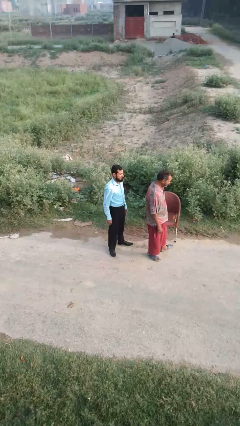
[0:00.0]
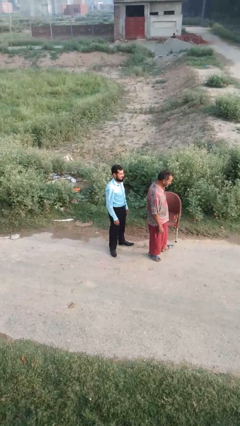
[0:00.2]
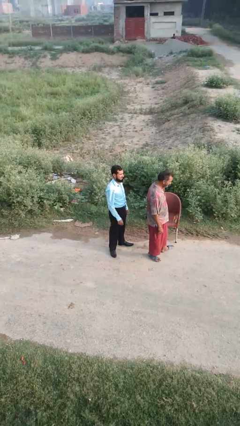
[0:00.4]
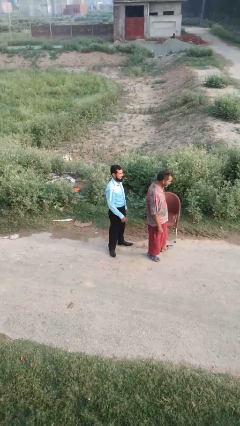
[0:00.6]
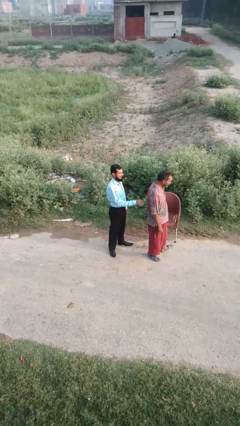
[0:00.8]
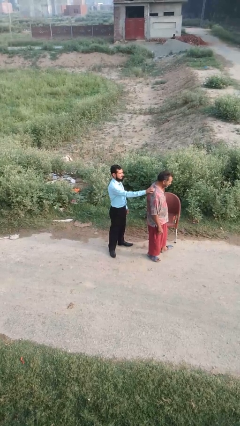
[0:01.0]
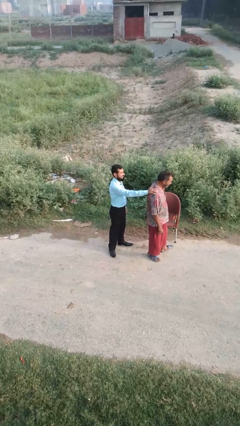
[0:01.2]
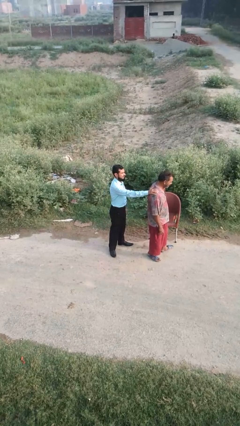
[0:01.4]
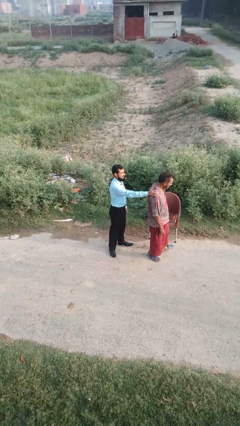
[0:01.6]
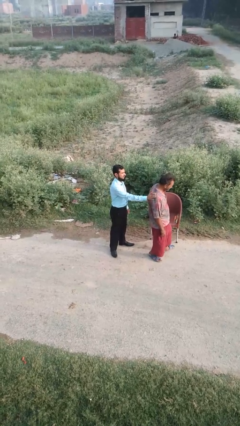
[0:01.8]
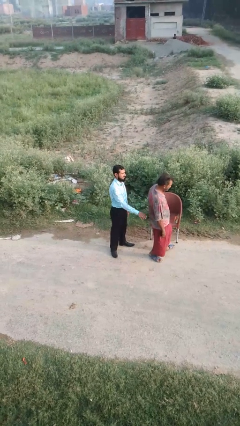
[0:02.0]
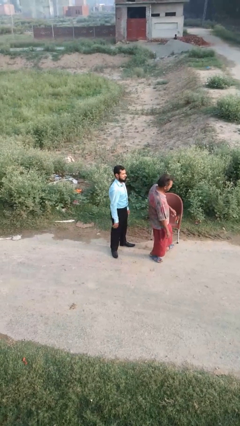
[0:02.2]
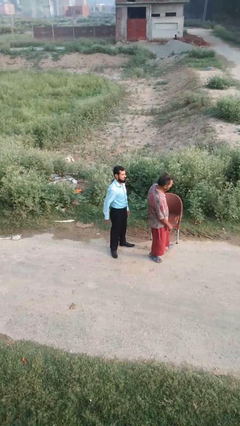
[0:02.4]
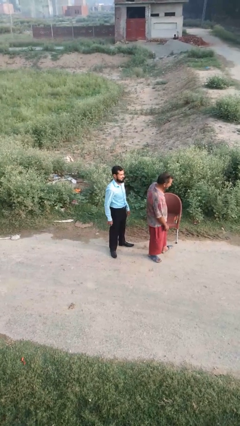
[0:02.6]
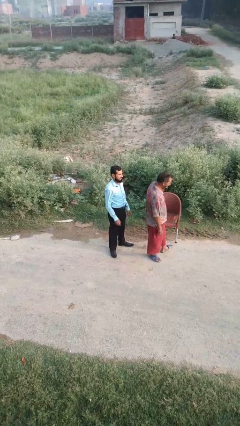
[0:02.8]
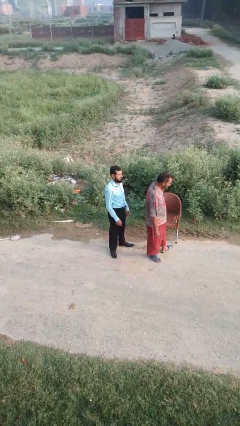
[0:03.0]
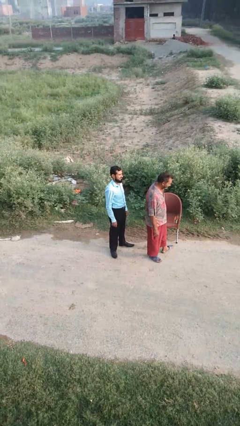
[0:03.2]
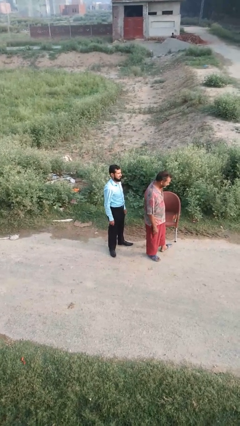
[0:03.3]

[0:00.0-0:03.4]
person touches back of person

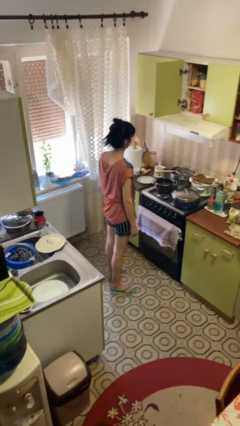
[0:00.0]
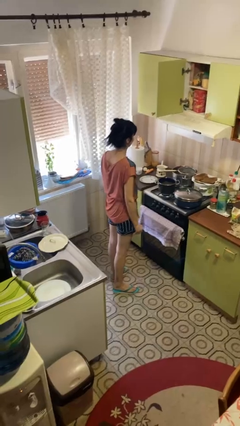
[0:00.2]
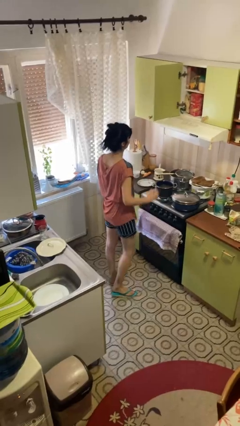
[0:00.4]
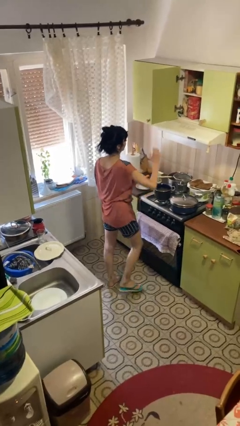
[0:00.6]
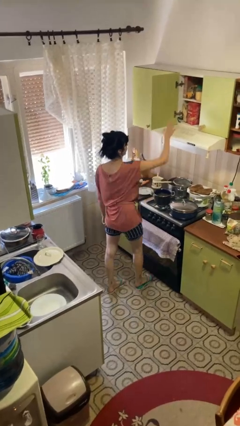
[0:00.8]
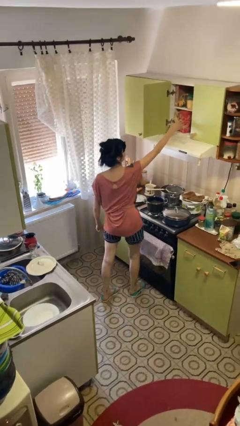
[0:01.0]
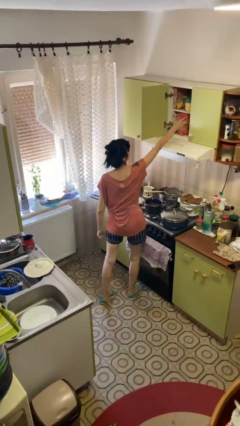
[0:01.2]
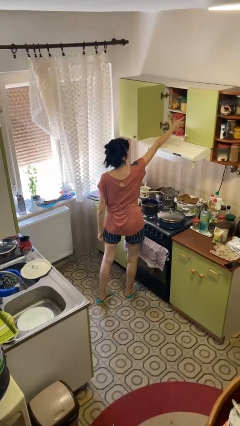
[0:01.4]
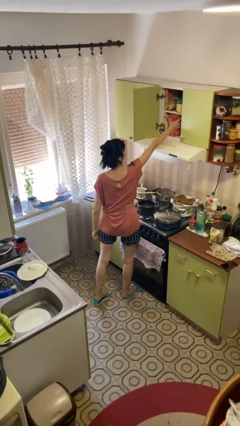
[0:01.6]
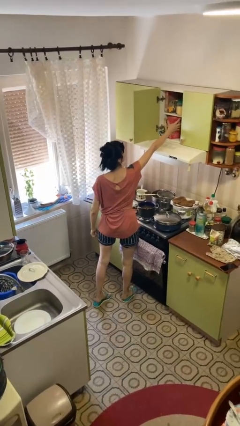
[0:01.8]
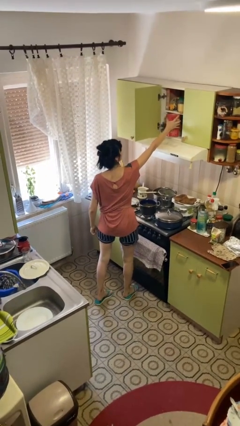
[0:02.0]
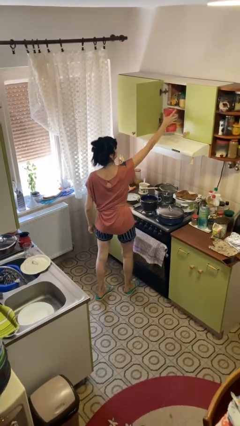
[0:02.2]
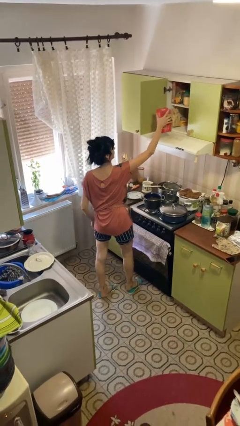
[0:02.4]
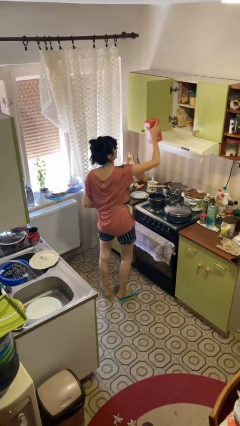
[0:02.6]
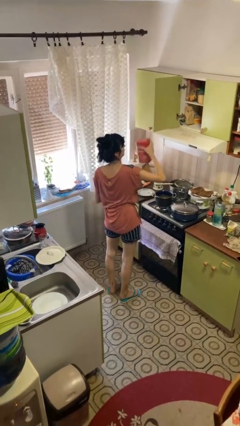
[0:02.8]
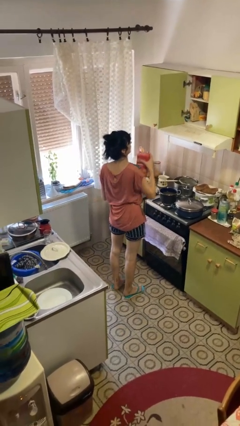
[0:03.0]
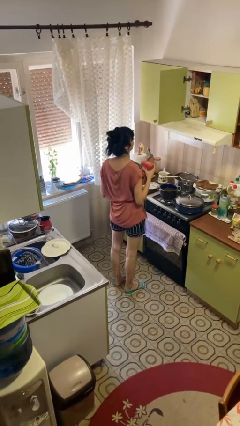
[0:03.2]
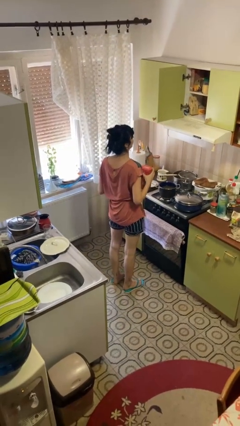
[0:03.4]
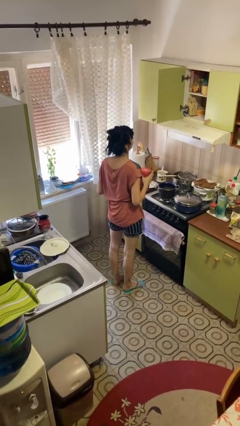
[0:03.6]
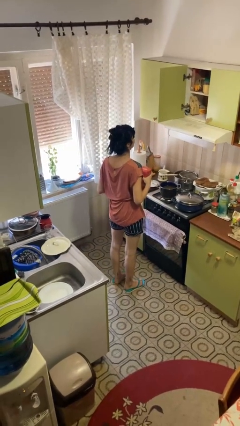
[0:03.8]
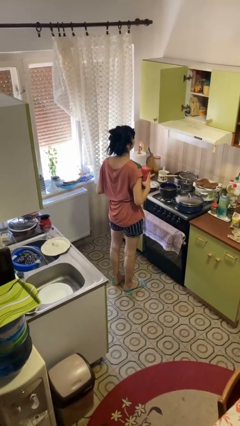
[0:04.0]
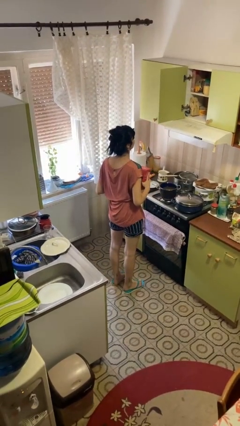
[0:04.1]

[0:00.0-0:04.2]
person picks up object from cabinet

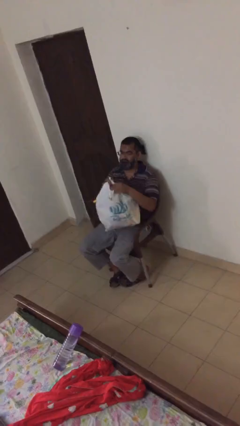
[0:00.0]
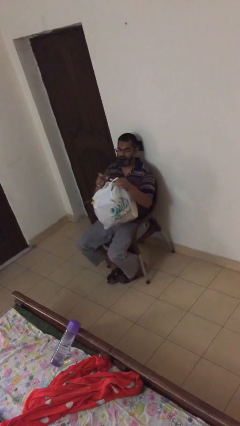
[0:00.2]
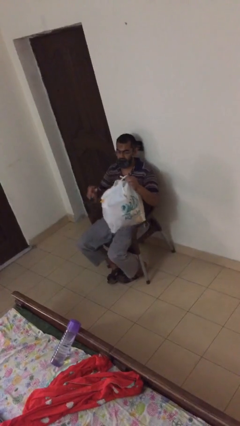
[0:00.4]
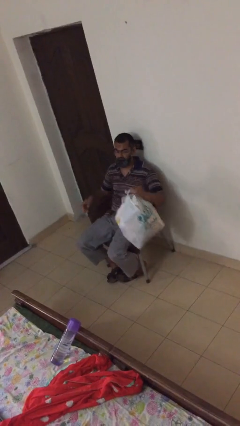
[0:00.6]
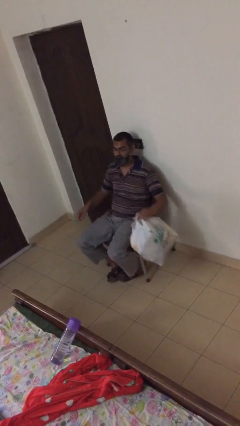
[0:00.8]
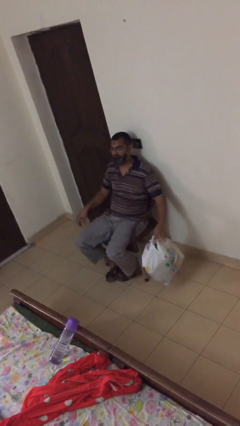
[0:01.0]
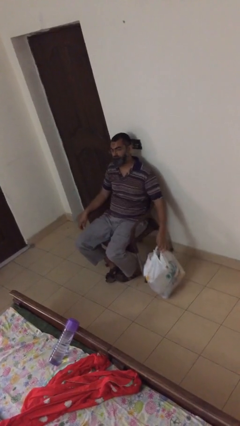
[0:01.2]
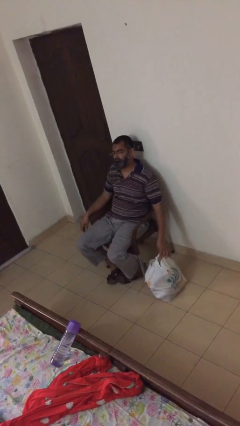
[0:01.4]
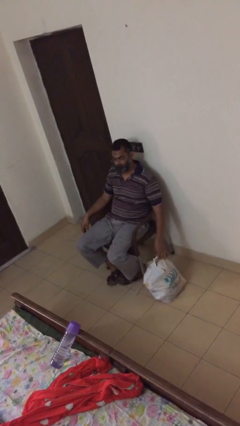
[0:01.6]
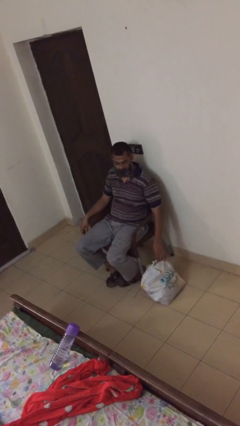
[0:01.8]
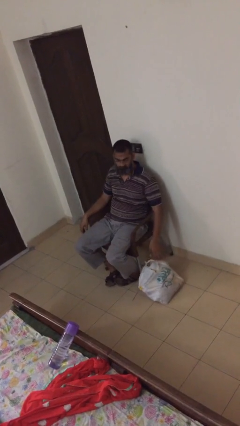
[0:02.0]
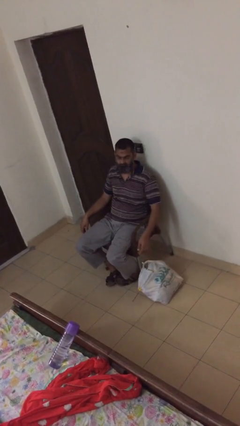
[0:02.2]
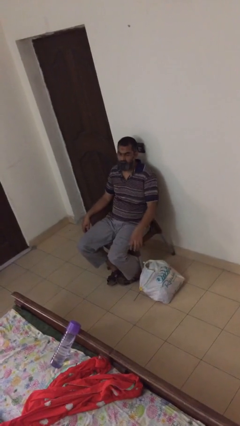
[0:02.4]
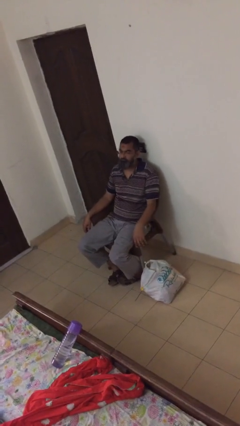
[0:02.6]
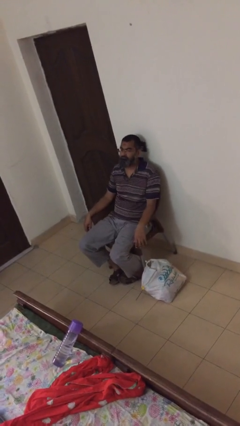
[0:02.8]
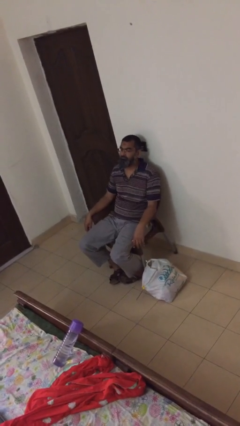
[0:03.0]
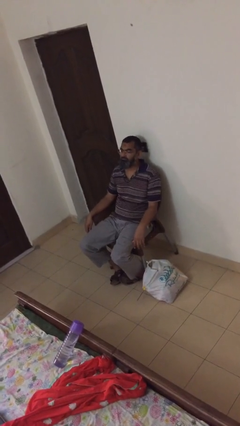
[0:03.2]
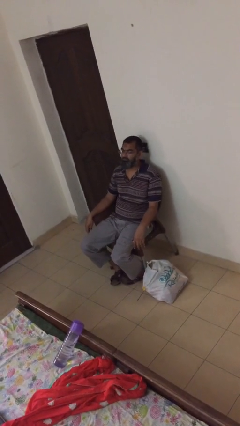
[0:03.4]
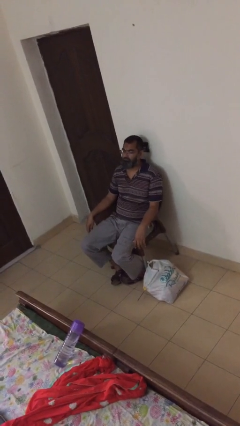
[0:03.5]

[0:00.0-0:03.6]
person puts down object on floor

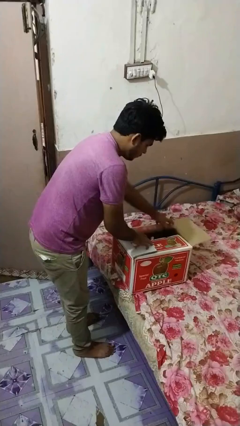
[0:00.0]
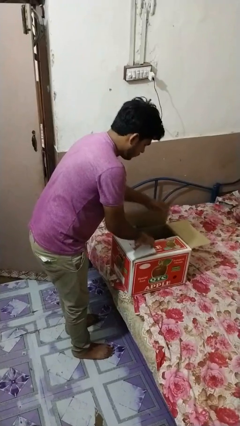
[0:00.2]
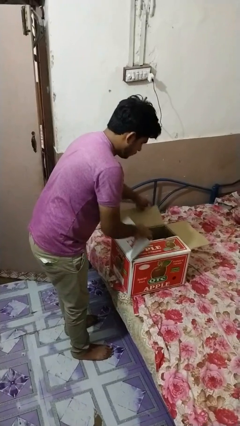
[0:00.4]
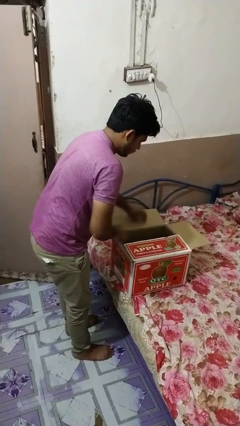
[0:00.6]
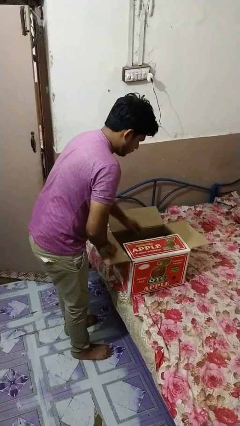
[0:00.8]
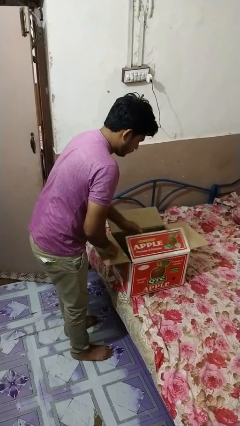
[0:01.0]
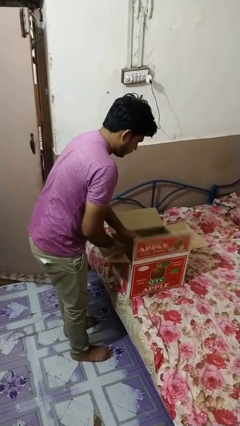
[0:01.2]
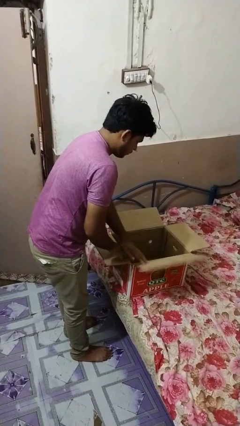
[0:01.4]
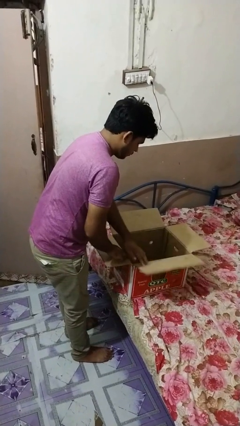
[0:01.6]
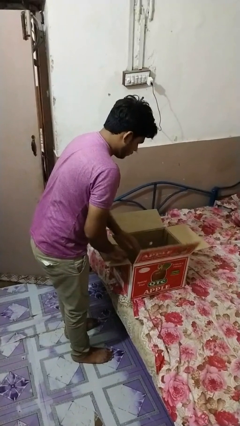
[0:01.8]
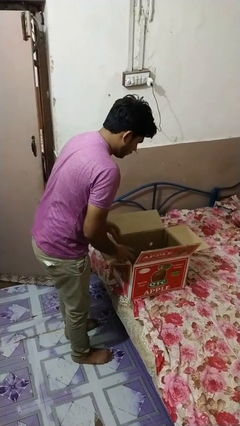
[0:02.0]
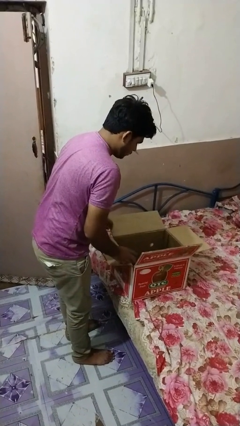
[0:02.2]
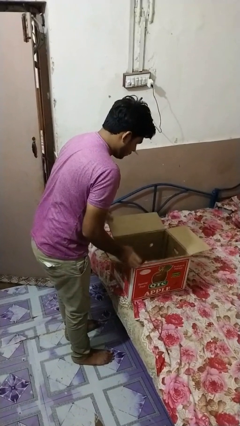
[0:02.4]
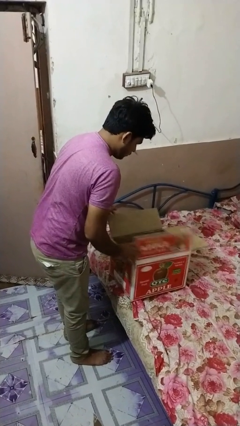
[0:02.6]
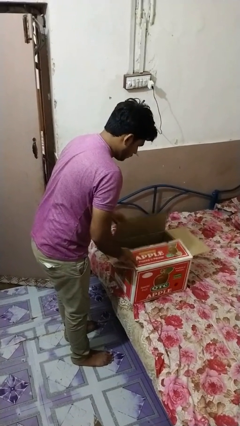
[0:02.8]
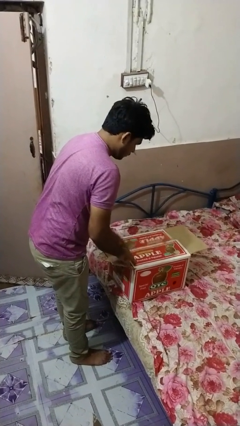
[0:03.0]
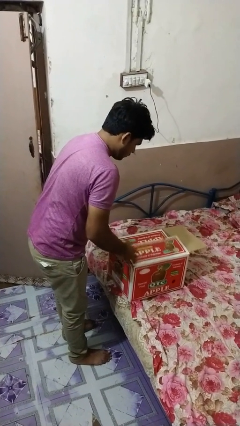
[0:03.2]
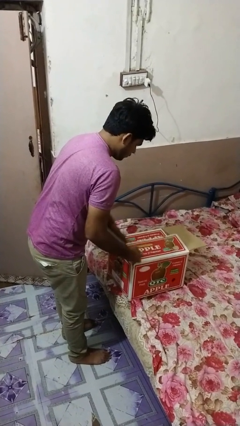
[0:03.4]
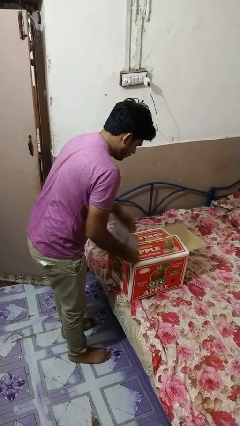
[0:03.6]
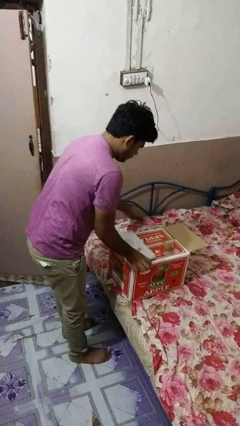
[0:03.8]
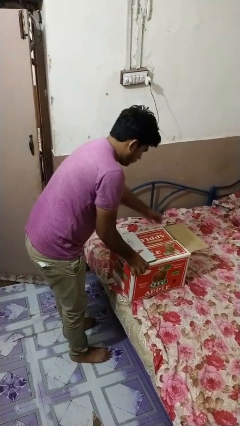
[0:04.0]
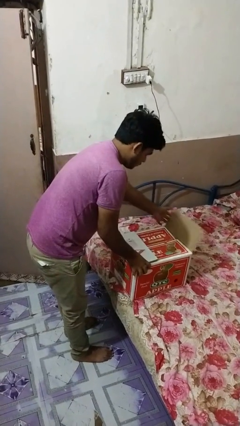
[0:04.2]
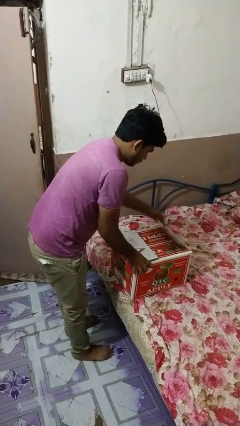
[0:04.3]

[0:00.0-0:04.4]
person opens box

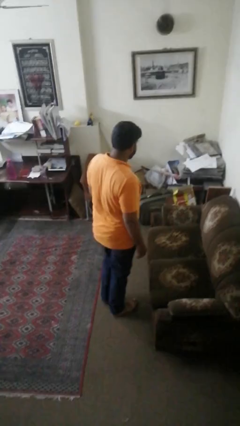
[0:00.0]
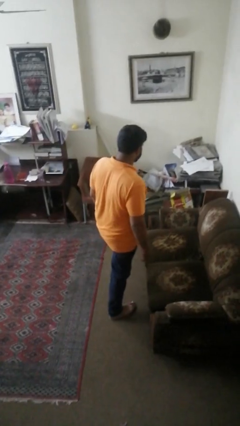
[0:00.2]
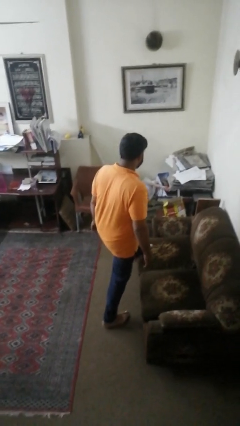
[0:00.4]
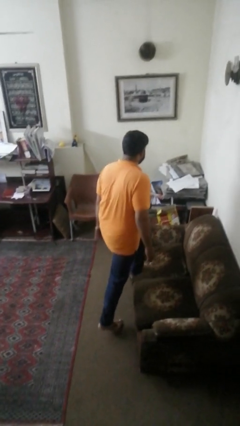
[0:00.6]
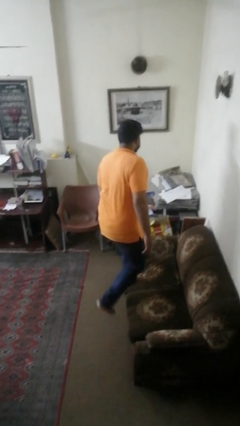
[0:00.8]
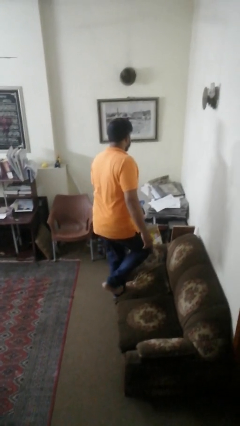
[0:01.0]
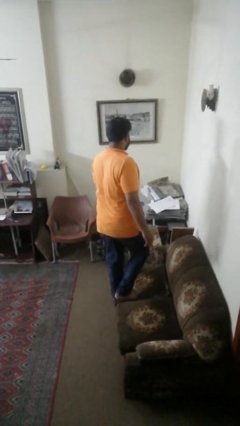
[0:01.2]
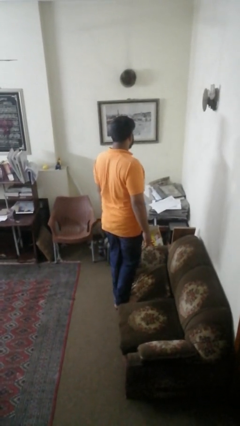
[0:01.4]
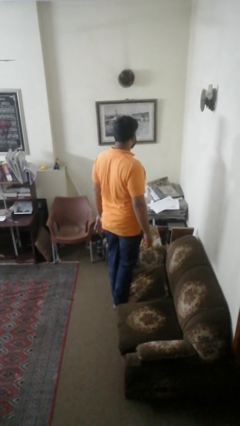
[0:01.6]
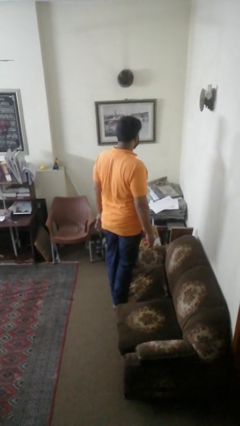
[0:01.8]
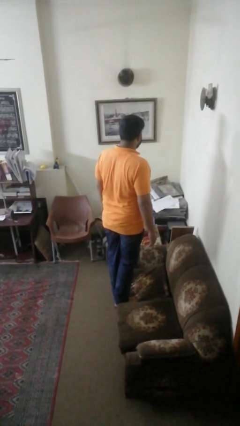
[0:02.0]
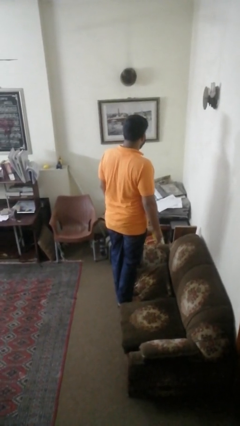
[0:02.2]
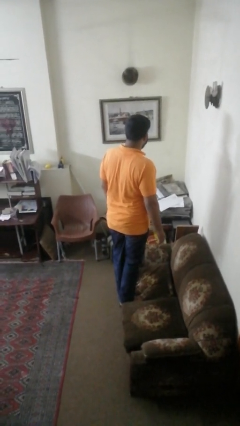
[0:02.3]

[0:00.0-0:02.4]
person climbs on couch
